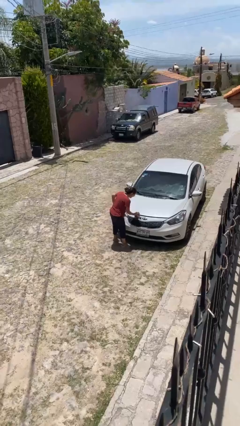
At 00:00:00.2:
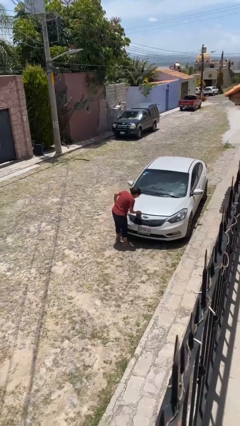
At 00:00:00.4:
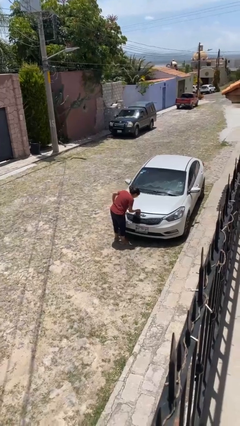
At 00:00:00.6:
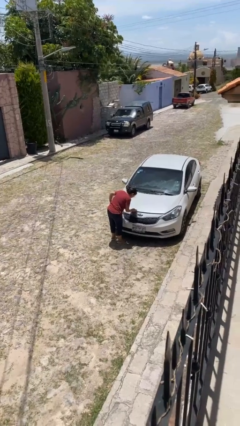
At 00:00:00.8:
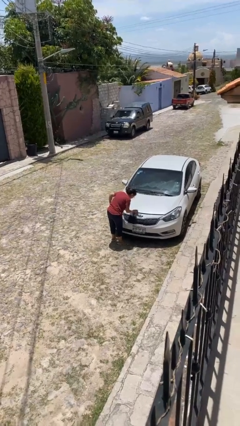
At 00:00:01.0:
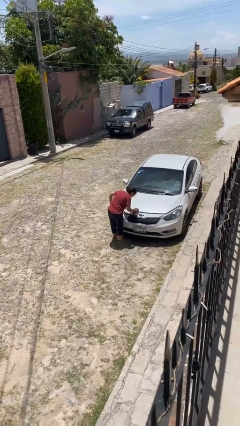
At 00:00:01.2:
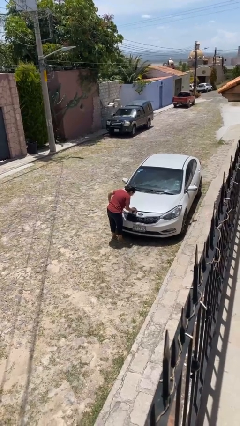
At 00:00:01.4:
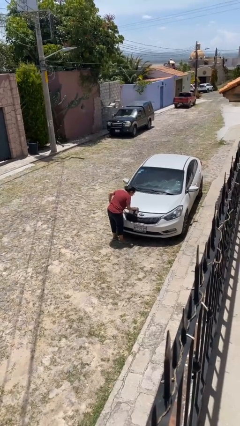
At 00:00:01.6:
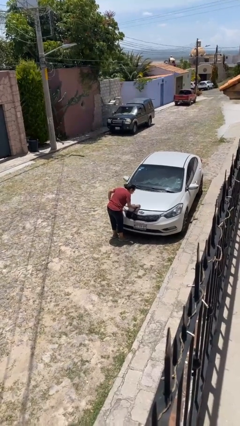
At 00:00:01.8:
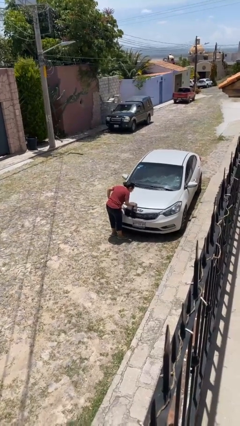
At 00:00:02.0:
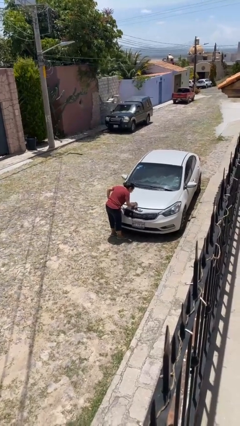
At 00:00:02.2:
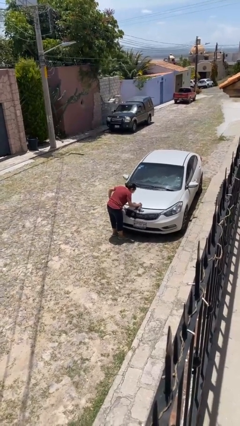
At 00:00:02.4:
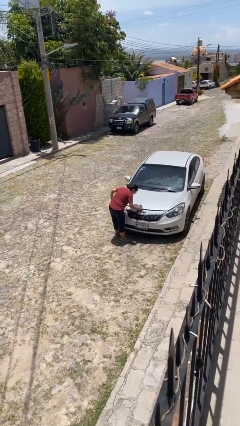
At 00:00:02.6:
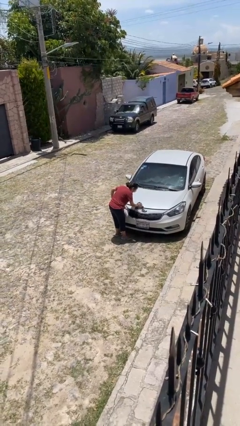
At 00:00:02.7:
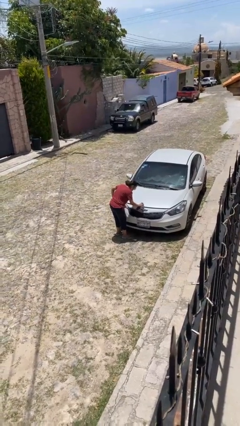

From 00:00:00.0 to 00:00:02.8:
person polishes car with rag

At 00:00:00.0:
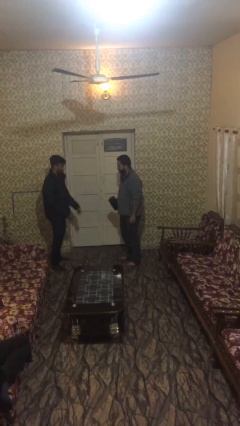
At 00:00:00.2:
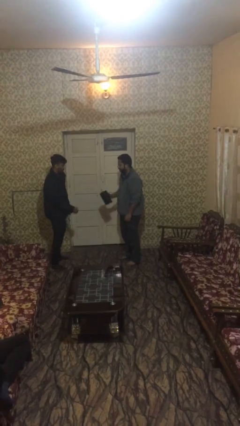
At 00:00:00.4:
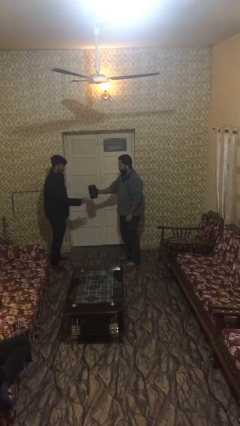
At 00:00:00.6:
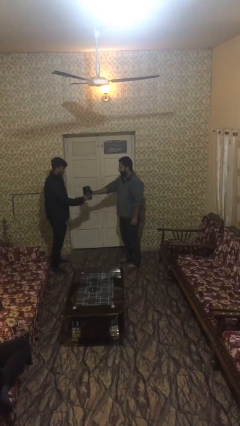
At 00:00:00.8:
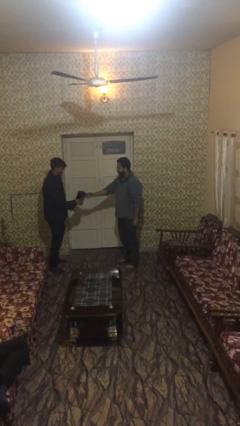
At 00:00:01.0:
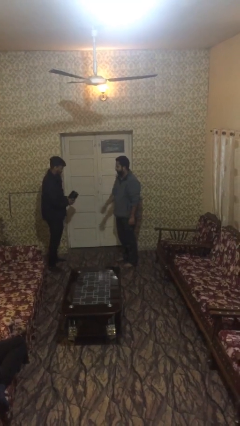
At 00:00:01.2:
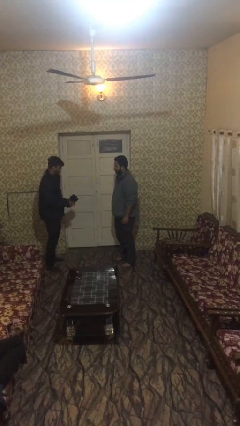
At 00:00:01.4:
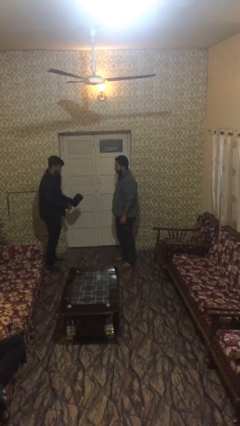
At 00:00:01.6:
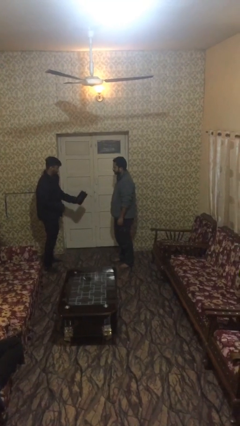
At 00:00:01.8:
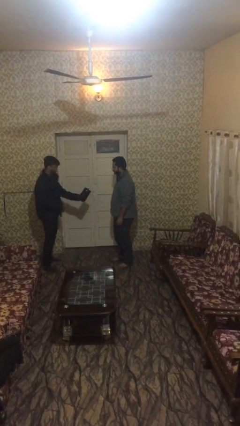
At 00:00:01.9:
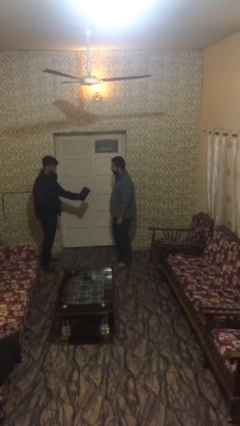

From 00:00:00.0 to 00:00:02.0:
person transfers object to person

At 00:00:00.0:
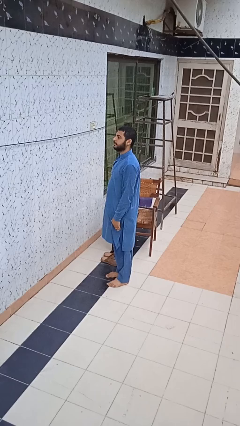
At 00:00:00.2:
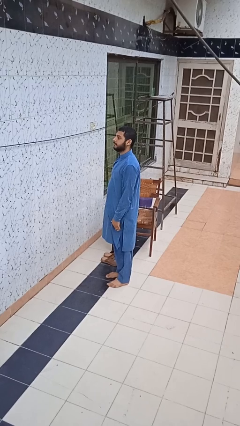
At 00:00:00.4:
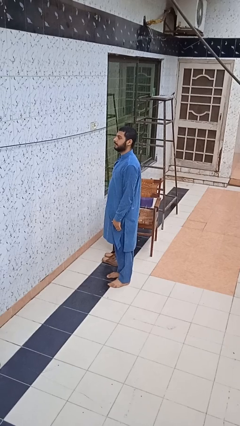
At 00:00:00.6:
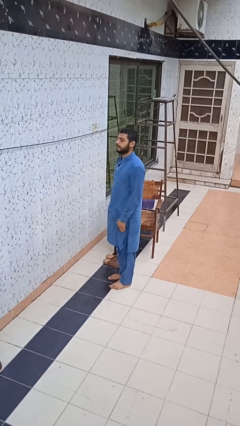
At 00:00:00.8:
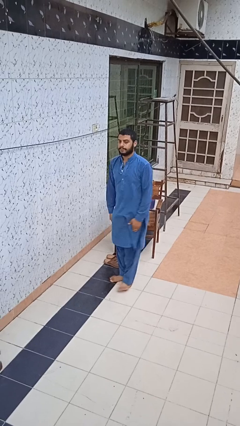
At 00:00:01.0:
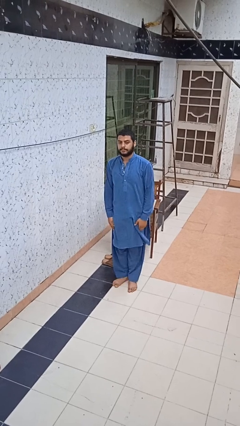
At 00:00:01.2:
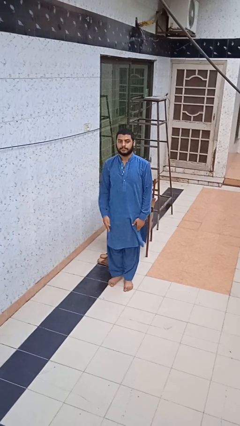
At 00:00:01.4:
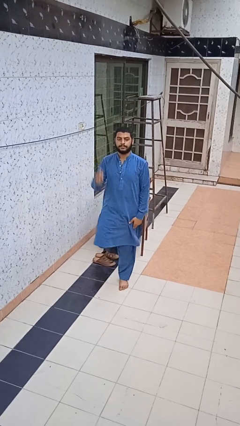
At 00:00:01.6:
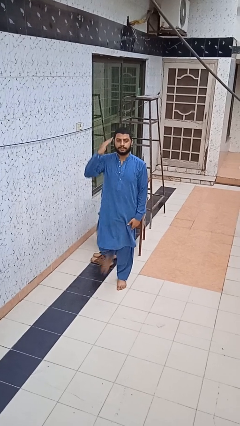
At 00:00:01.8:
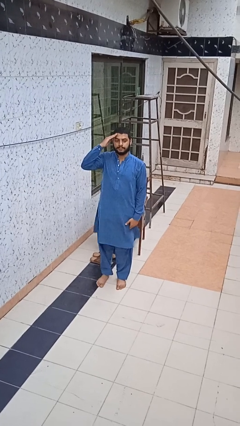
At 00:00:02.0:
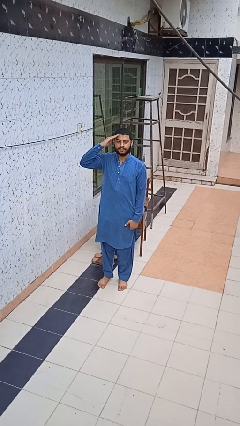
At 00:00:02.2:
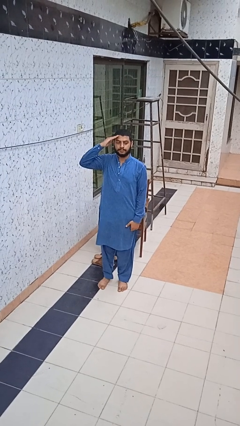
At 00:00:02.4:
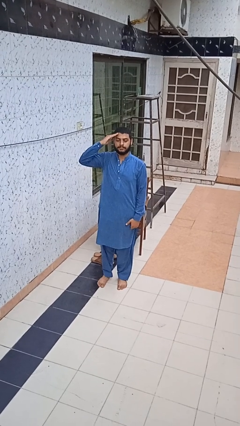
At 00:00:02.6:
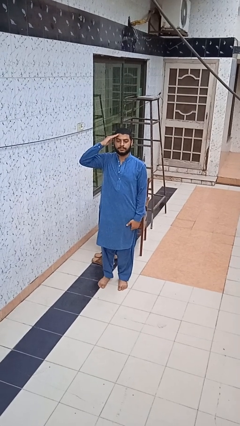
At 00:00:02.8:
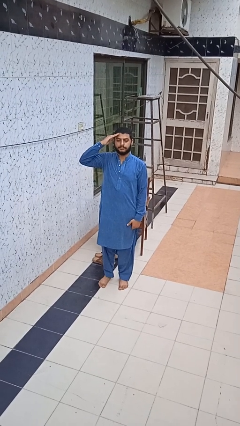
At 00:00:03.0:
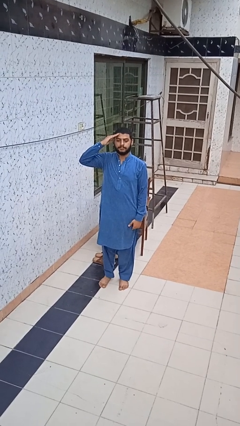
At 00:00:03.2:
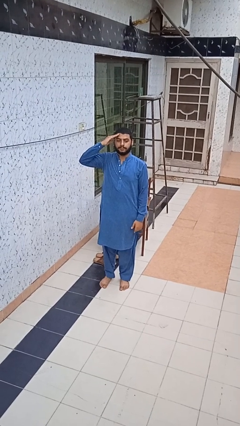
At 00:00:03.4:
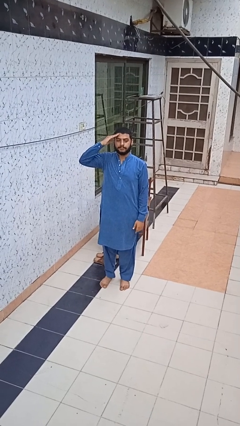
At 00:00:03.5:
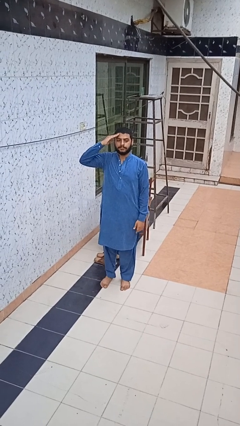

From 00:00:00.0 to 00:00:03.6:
person salutes

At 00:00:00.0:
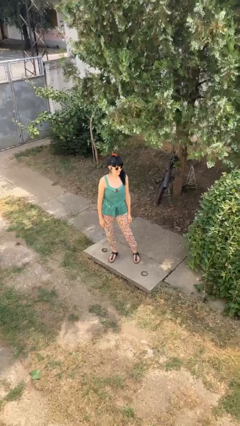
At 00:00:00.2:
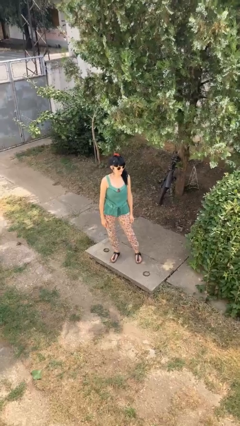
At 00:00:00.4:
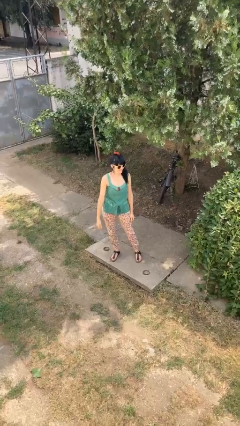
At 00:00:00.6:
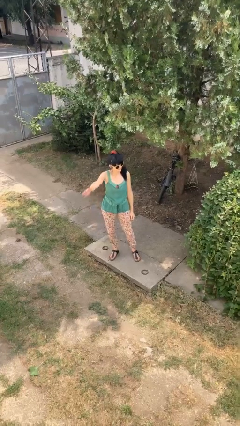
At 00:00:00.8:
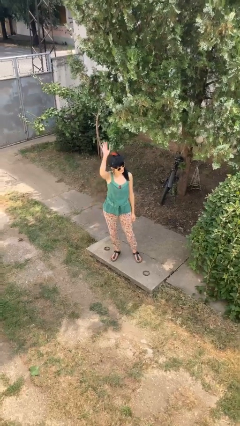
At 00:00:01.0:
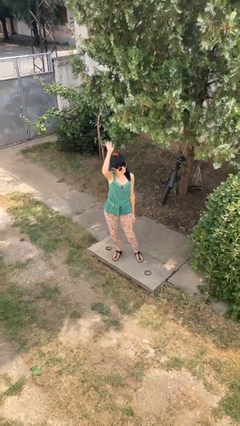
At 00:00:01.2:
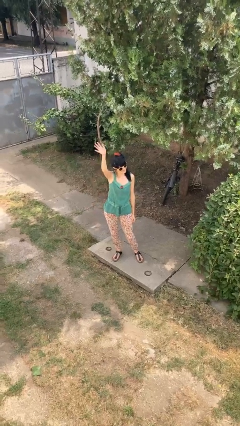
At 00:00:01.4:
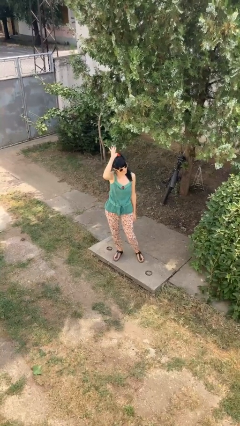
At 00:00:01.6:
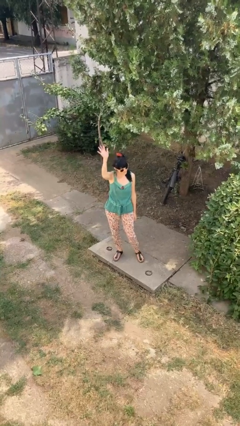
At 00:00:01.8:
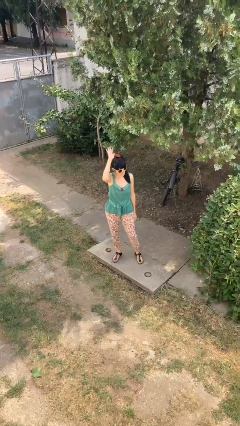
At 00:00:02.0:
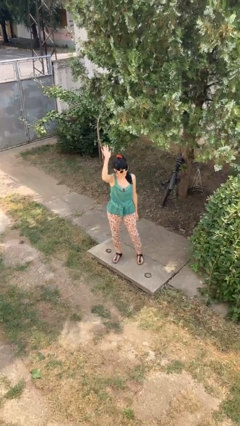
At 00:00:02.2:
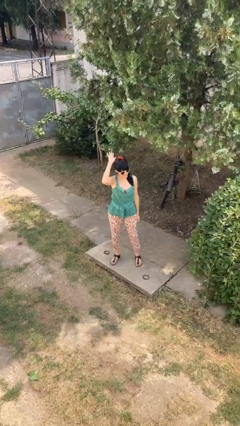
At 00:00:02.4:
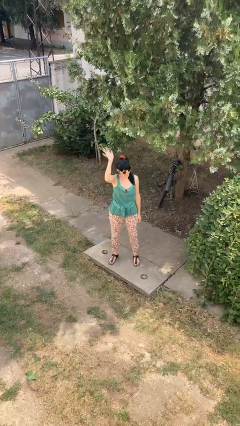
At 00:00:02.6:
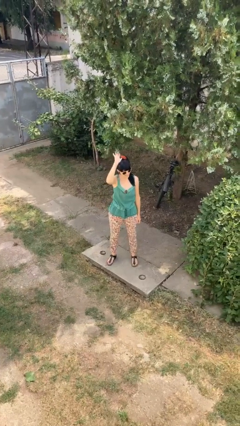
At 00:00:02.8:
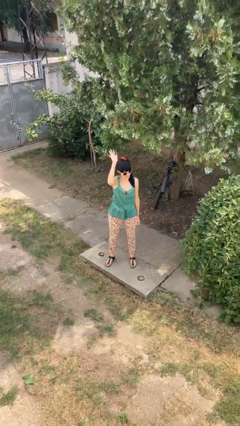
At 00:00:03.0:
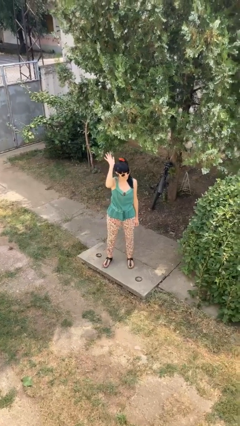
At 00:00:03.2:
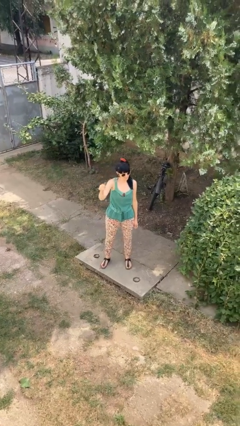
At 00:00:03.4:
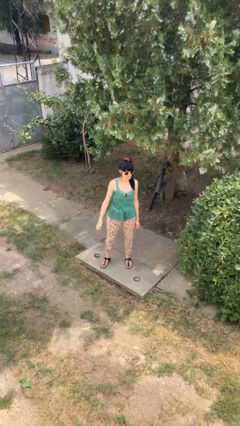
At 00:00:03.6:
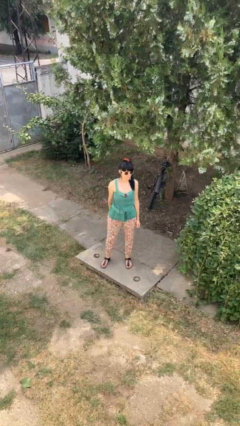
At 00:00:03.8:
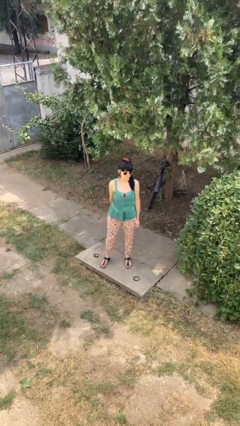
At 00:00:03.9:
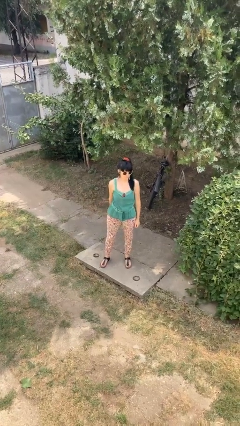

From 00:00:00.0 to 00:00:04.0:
person waves at person

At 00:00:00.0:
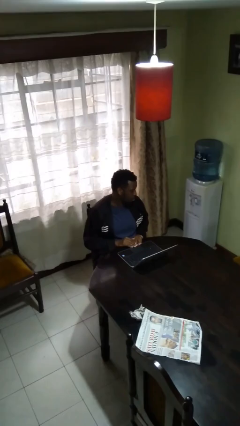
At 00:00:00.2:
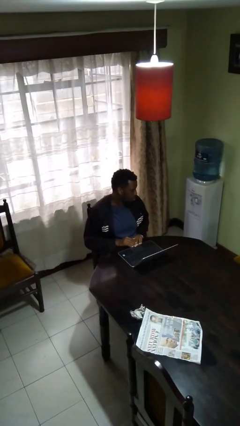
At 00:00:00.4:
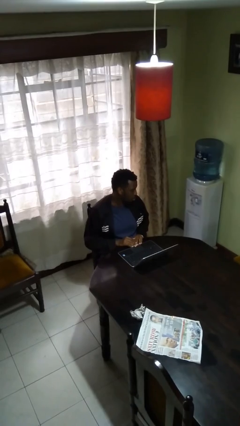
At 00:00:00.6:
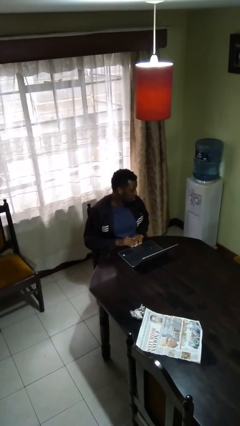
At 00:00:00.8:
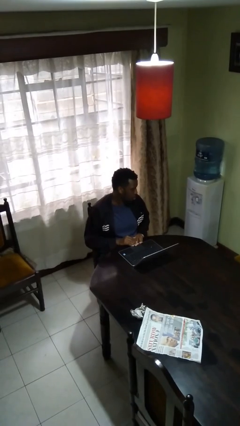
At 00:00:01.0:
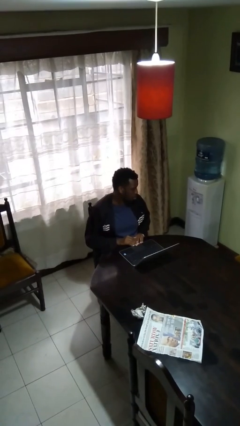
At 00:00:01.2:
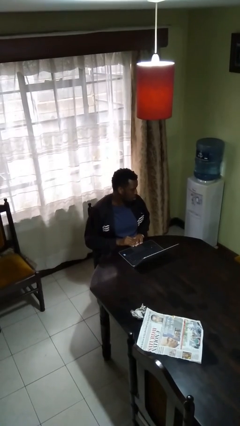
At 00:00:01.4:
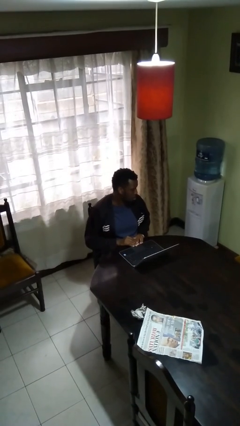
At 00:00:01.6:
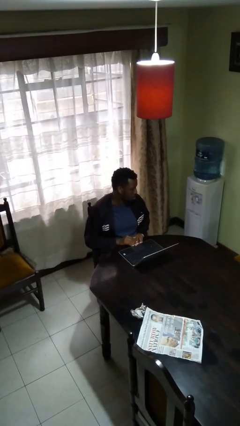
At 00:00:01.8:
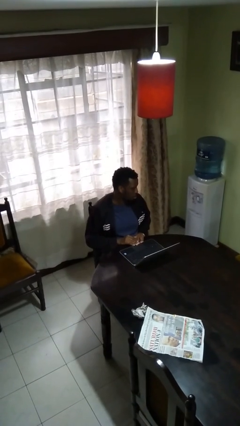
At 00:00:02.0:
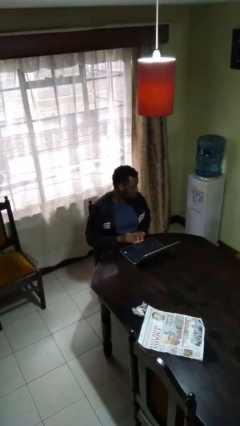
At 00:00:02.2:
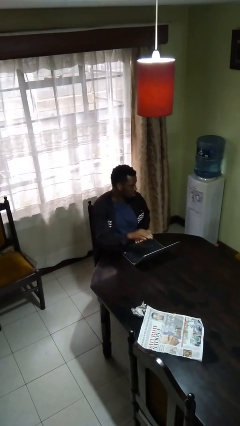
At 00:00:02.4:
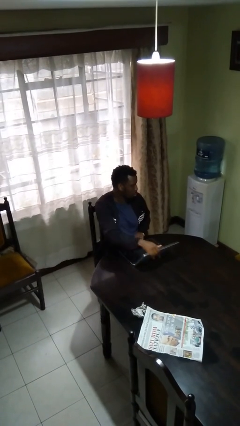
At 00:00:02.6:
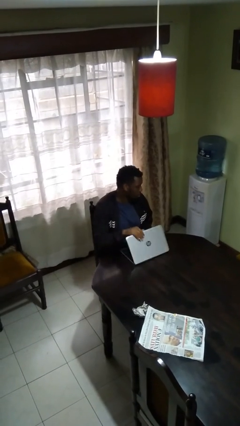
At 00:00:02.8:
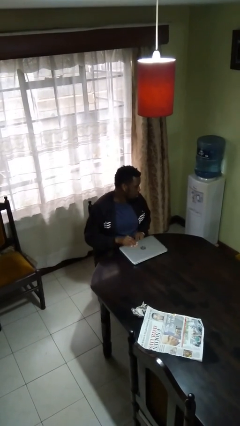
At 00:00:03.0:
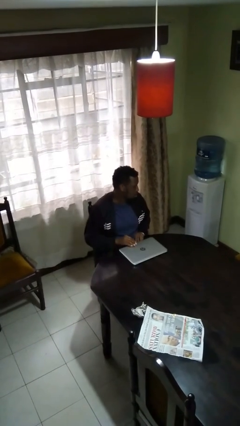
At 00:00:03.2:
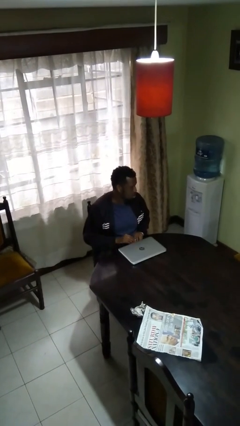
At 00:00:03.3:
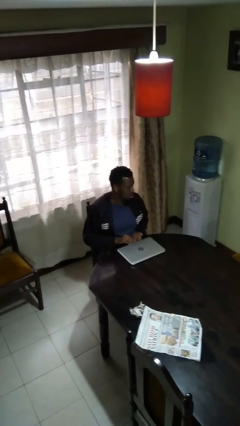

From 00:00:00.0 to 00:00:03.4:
person closes laptop

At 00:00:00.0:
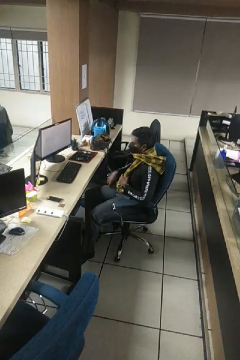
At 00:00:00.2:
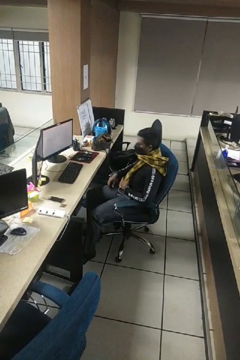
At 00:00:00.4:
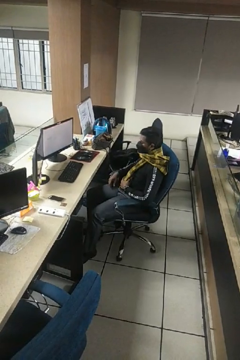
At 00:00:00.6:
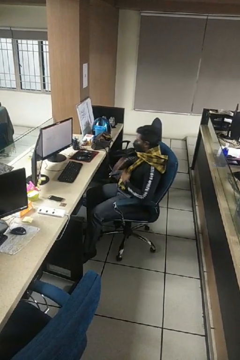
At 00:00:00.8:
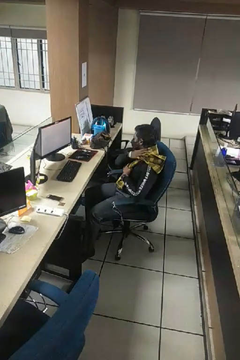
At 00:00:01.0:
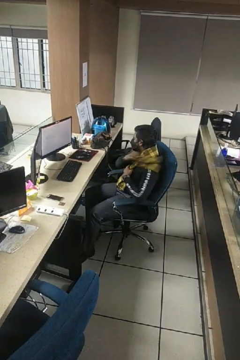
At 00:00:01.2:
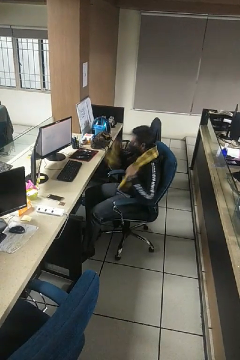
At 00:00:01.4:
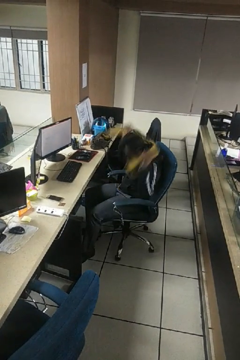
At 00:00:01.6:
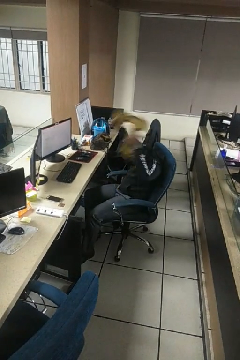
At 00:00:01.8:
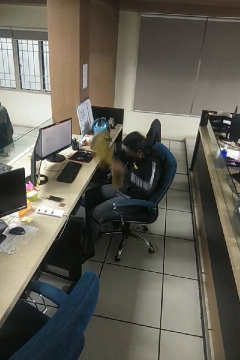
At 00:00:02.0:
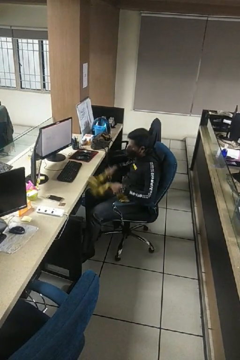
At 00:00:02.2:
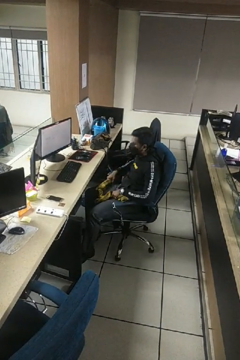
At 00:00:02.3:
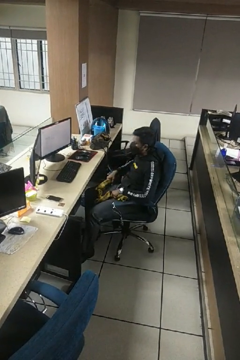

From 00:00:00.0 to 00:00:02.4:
person takes off scarf
